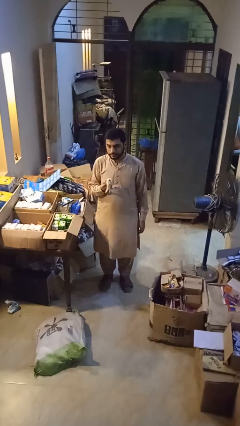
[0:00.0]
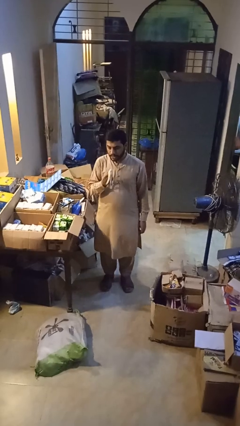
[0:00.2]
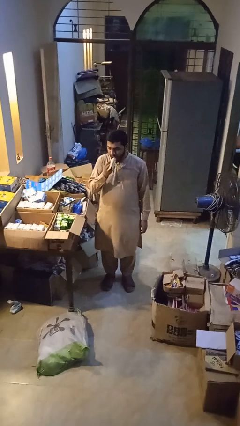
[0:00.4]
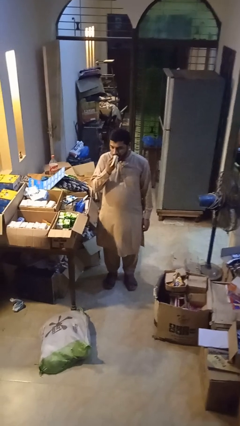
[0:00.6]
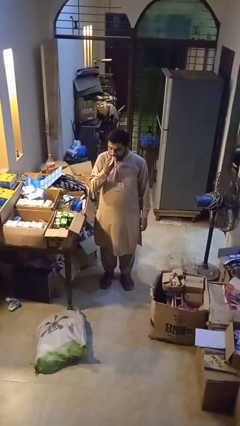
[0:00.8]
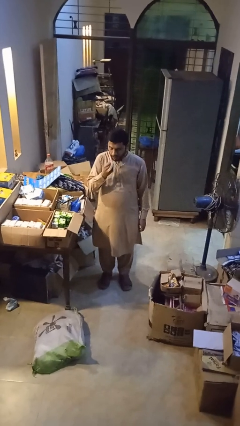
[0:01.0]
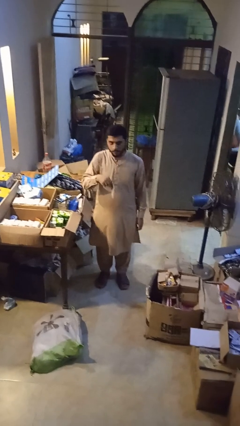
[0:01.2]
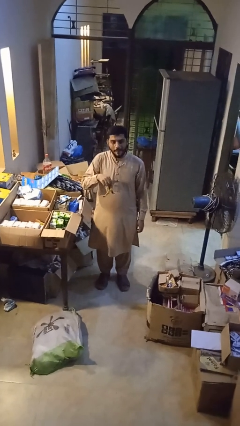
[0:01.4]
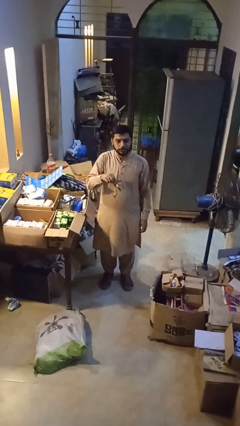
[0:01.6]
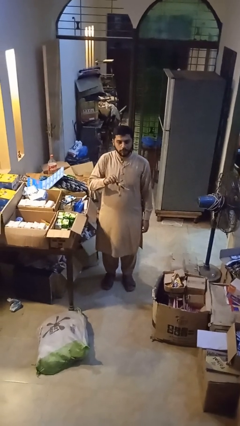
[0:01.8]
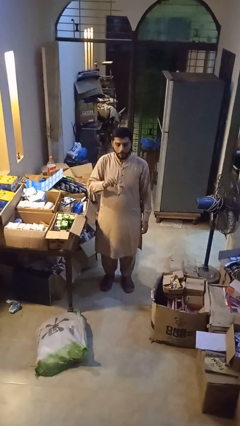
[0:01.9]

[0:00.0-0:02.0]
person eats banana

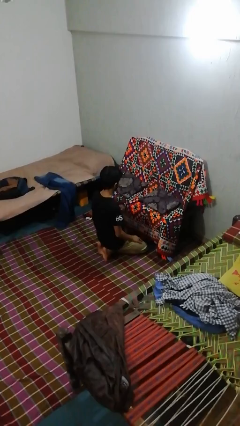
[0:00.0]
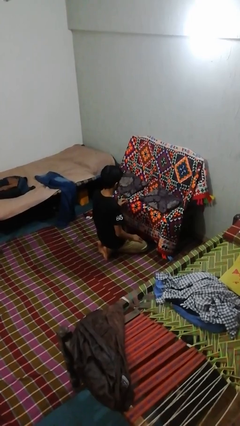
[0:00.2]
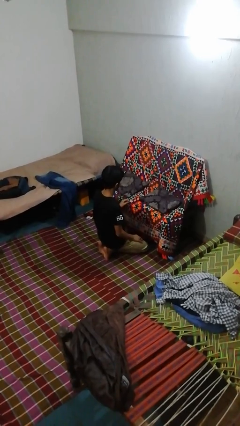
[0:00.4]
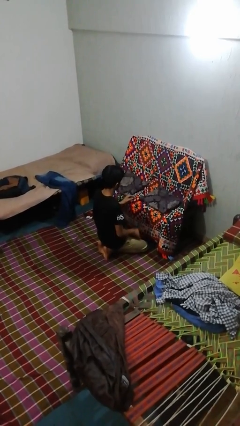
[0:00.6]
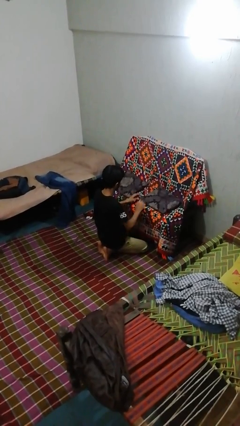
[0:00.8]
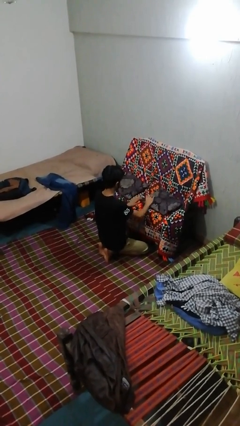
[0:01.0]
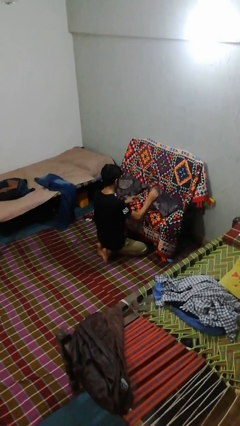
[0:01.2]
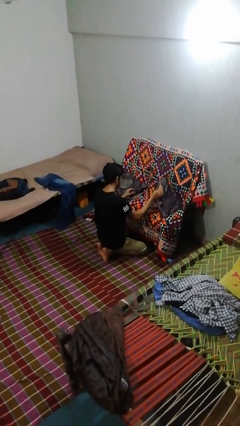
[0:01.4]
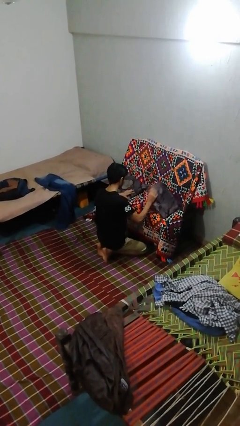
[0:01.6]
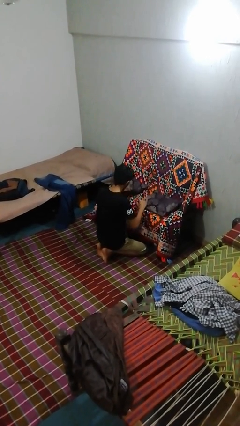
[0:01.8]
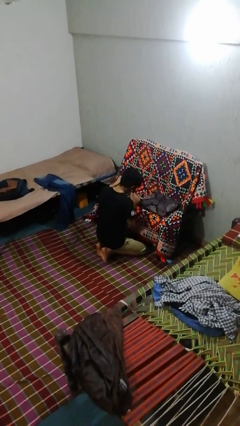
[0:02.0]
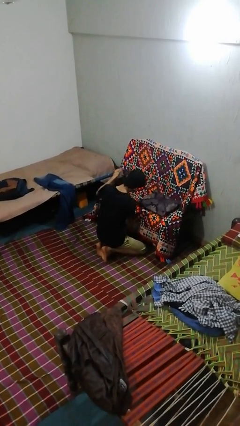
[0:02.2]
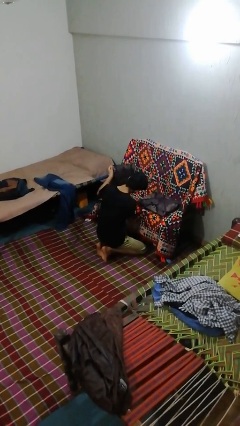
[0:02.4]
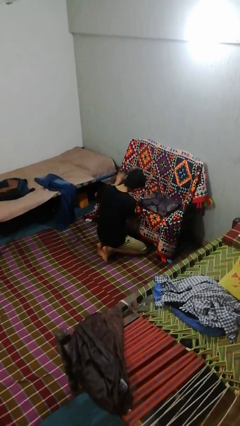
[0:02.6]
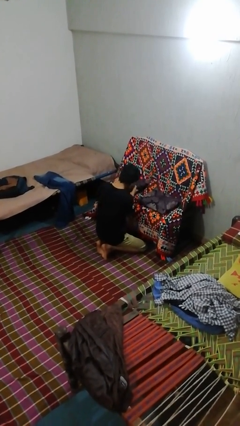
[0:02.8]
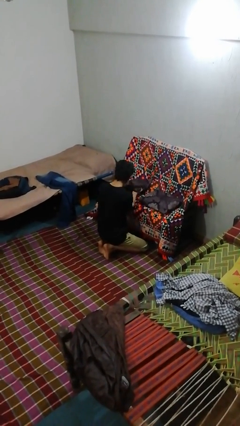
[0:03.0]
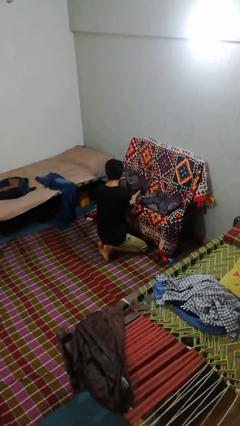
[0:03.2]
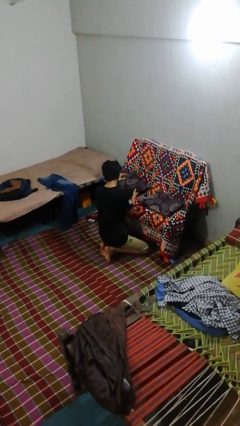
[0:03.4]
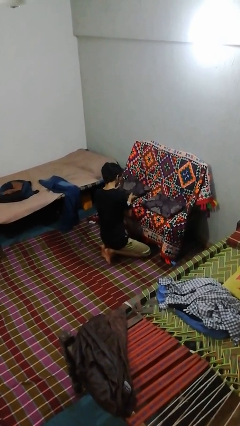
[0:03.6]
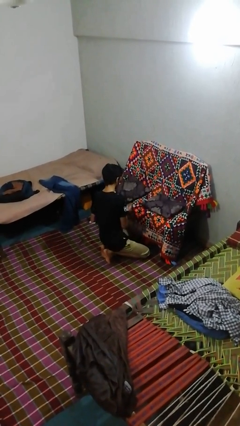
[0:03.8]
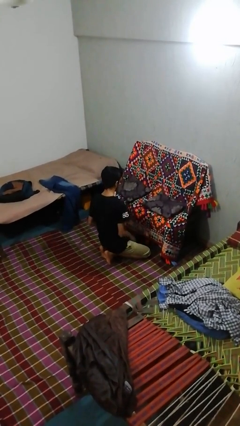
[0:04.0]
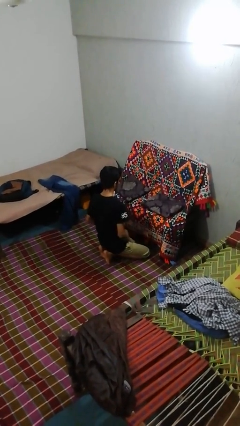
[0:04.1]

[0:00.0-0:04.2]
person searches in couch

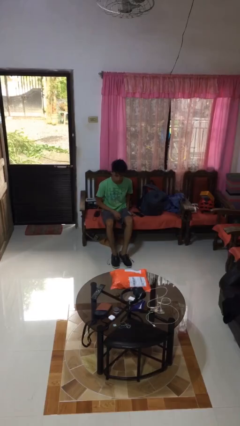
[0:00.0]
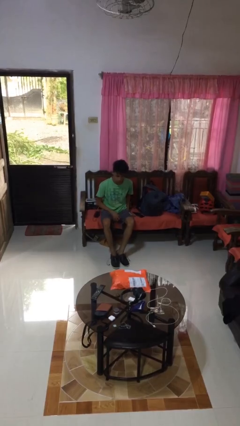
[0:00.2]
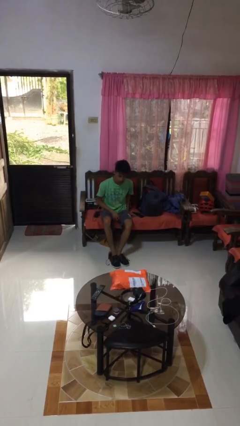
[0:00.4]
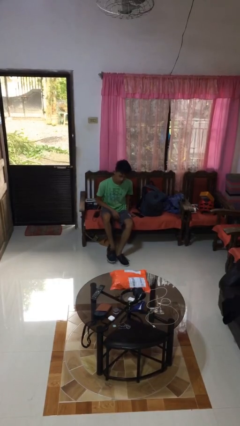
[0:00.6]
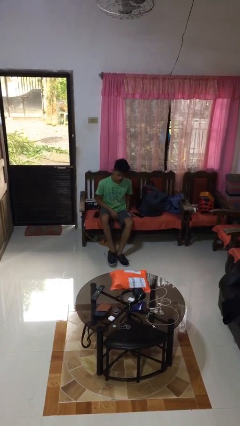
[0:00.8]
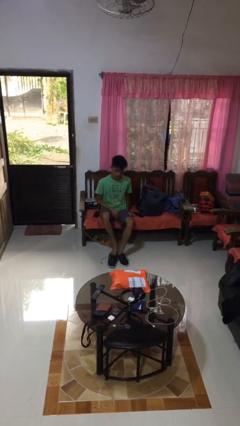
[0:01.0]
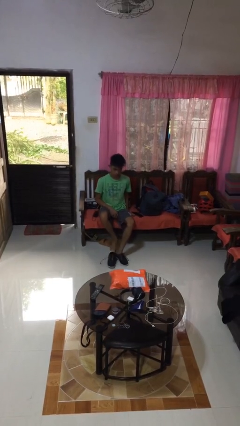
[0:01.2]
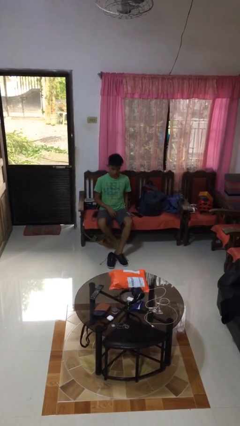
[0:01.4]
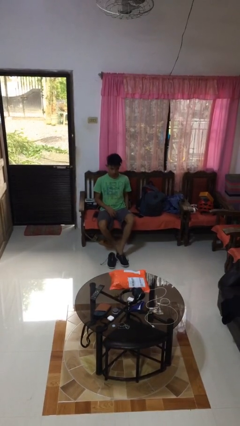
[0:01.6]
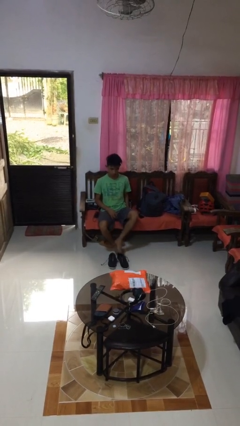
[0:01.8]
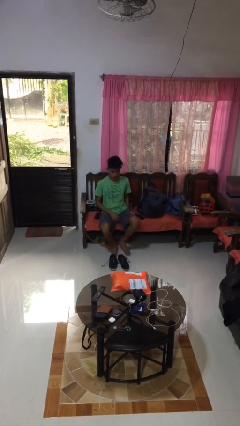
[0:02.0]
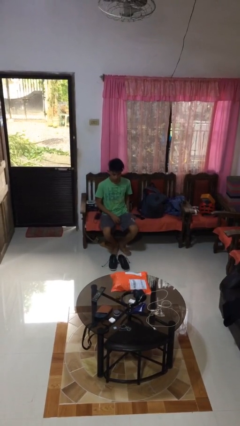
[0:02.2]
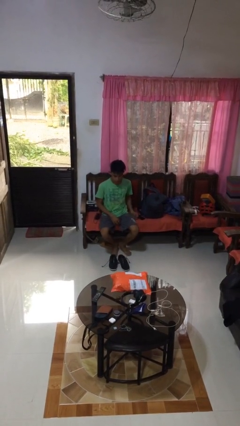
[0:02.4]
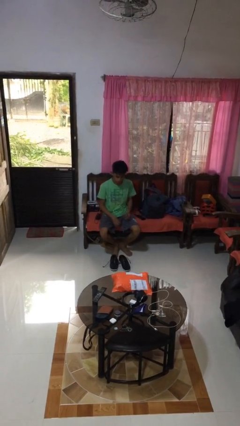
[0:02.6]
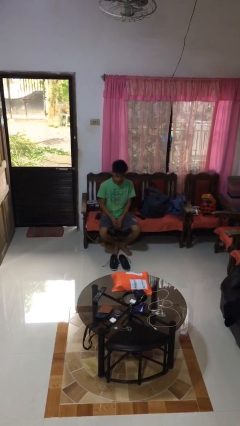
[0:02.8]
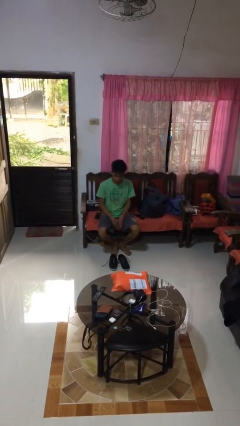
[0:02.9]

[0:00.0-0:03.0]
person takes off shoes

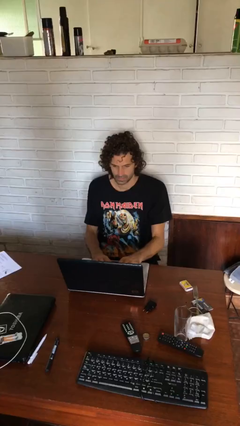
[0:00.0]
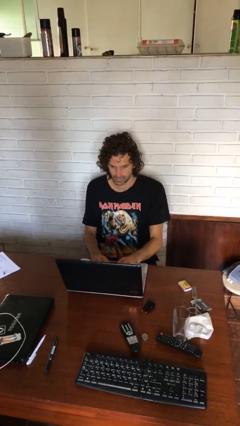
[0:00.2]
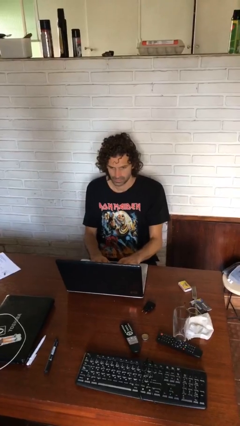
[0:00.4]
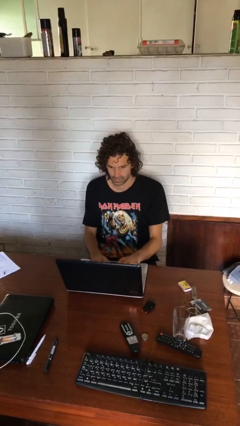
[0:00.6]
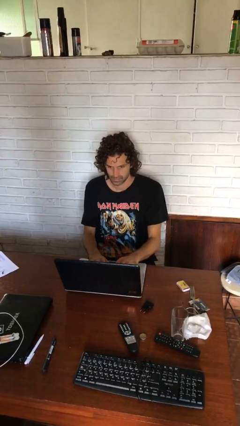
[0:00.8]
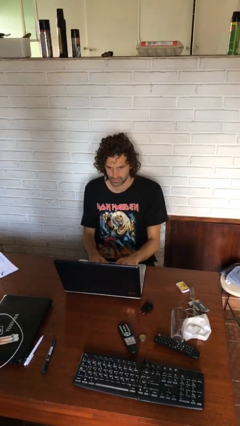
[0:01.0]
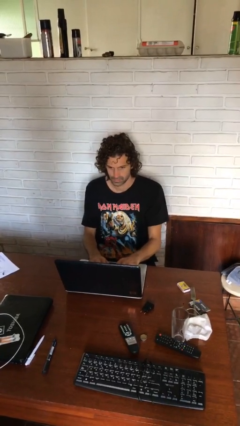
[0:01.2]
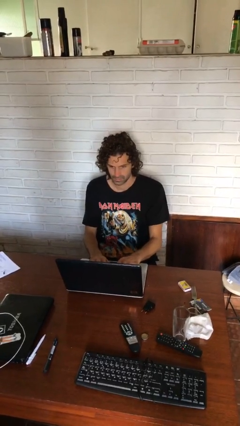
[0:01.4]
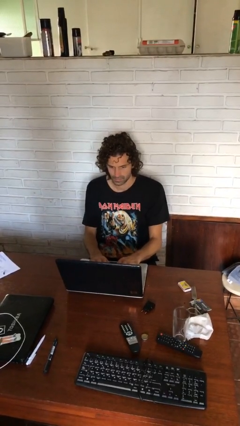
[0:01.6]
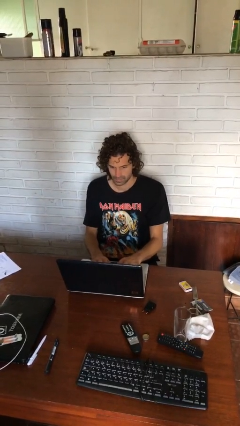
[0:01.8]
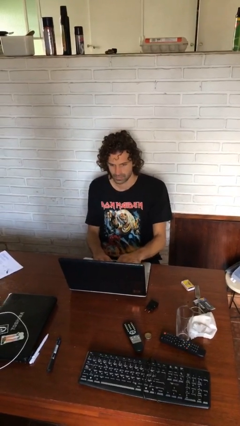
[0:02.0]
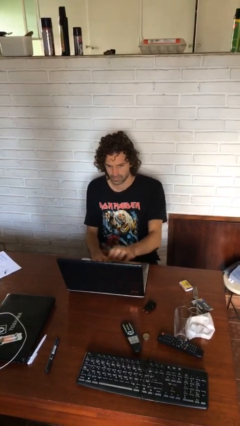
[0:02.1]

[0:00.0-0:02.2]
person interacts with laptop

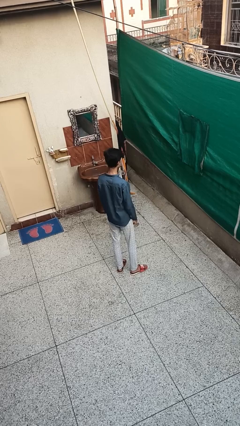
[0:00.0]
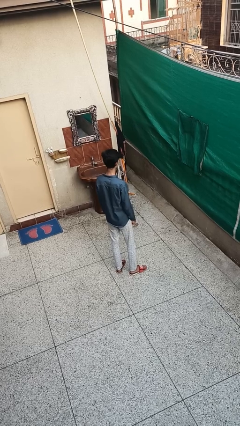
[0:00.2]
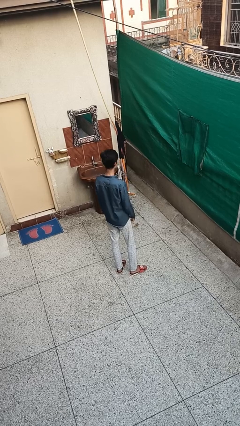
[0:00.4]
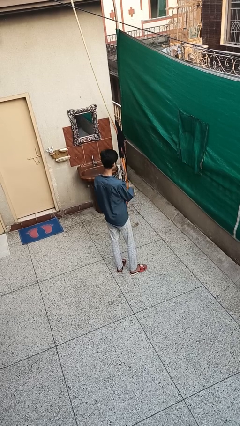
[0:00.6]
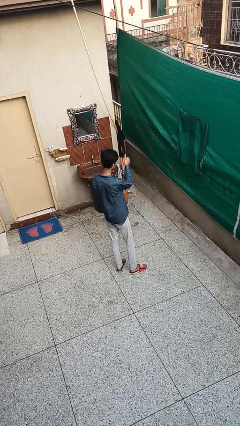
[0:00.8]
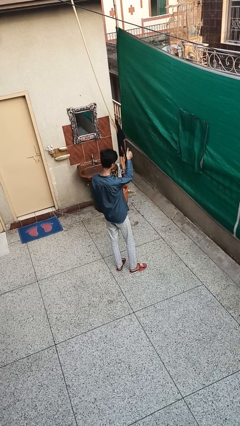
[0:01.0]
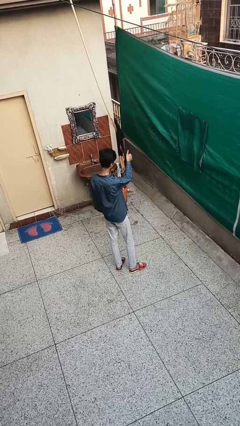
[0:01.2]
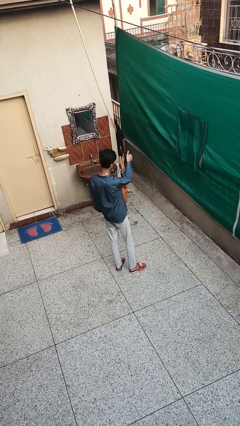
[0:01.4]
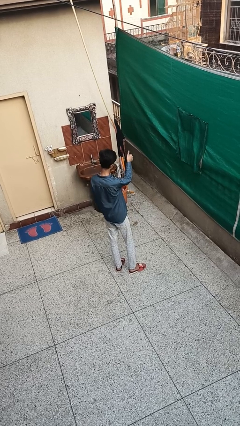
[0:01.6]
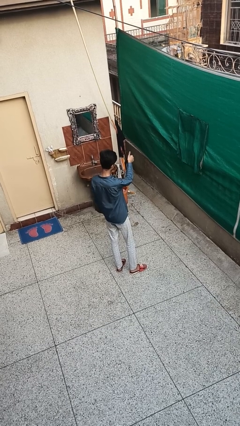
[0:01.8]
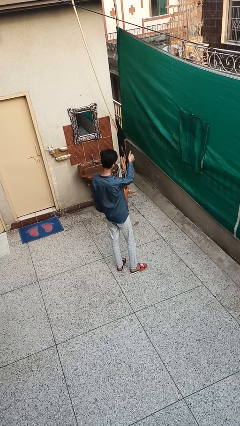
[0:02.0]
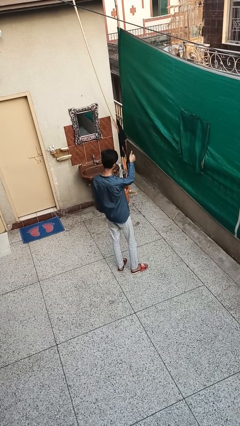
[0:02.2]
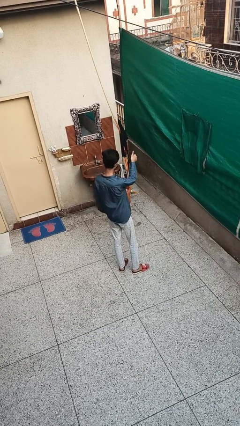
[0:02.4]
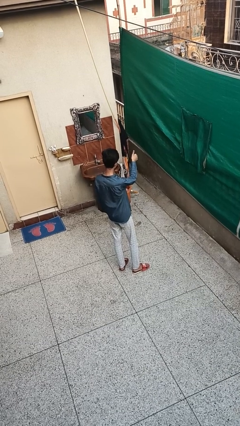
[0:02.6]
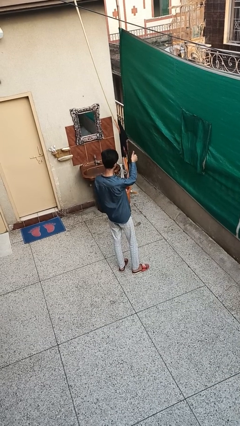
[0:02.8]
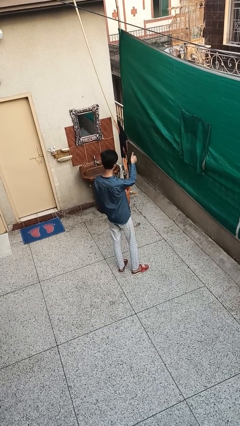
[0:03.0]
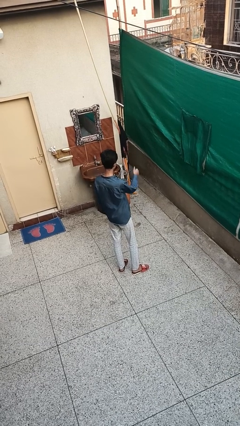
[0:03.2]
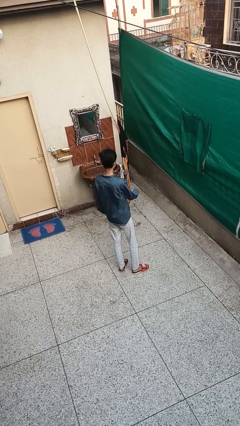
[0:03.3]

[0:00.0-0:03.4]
person gestures thumbs up

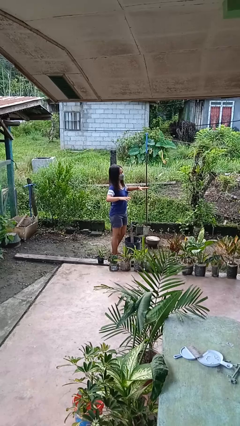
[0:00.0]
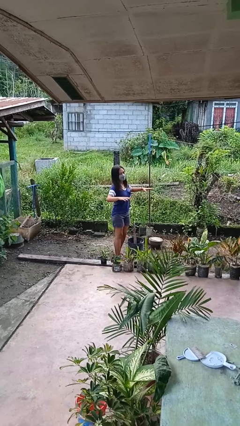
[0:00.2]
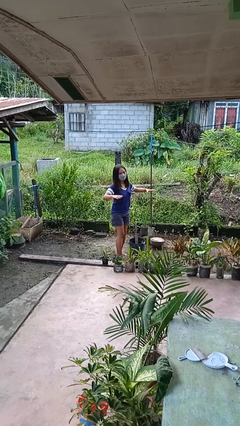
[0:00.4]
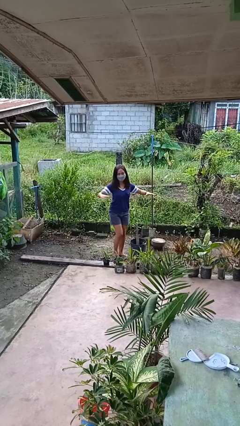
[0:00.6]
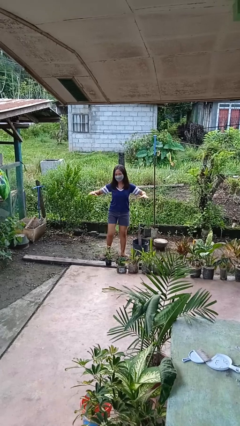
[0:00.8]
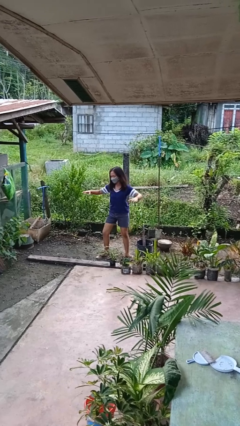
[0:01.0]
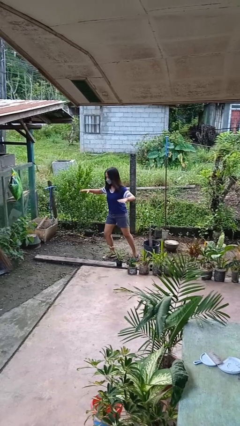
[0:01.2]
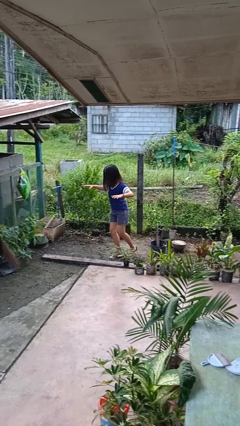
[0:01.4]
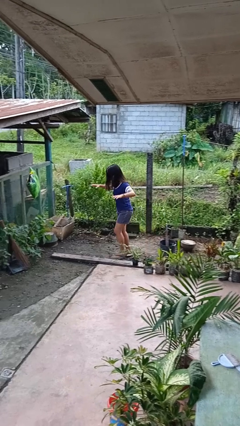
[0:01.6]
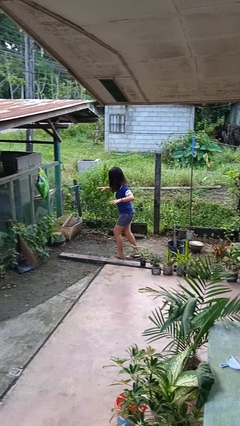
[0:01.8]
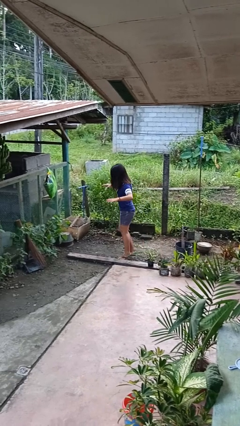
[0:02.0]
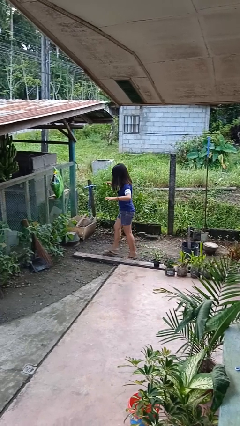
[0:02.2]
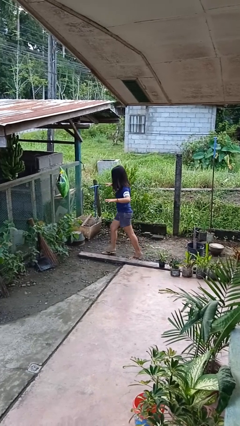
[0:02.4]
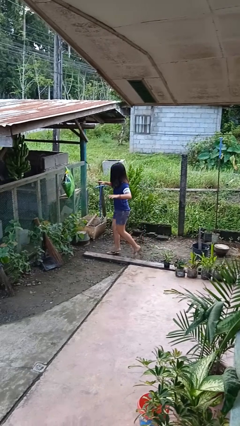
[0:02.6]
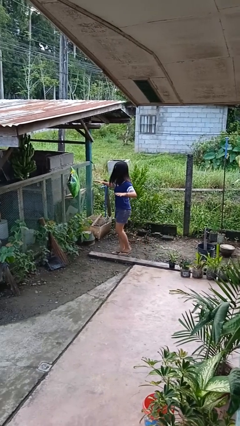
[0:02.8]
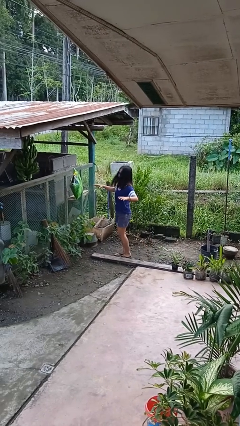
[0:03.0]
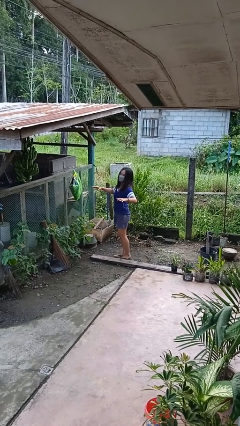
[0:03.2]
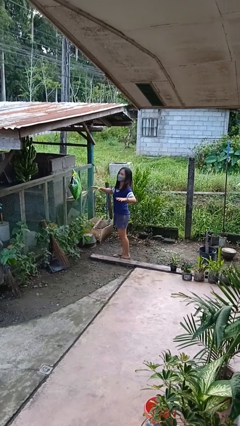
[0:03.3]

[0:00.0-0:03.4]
person walks tiptoe
